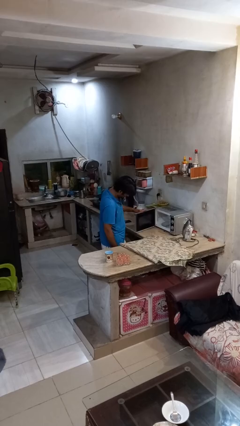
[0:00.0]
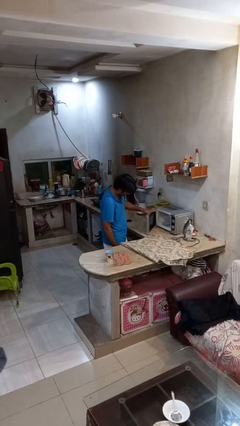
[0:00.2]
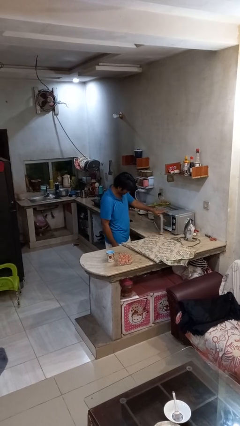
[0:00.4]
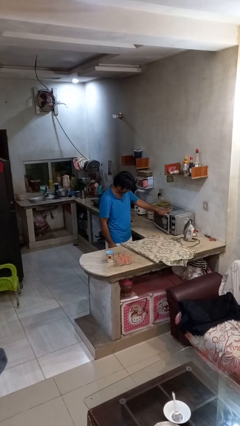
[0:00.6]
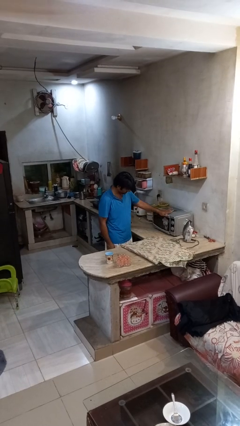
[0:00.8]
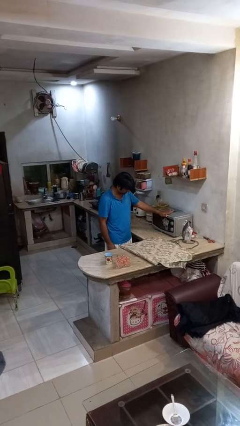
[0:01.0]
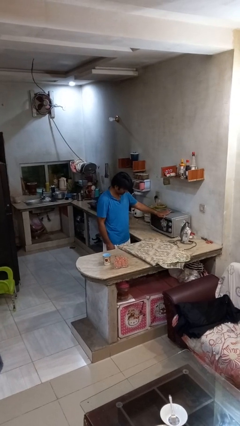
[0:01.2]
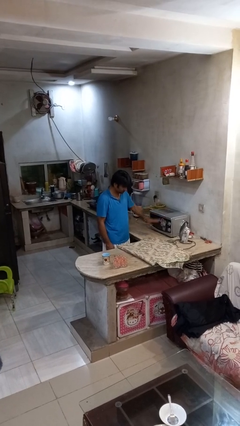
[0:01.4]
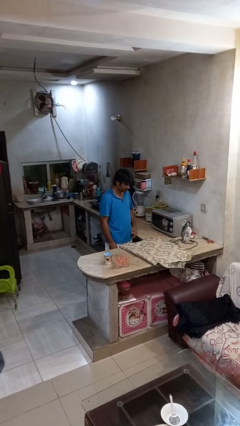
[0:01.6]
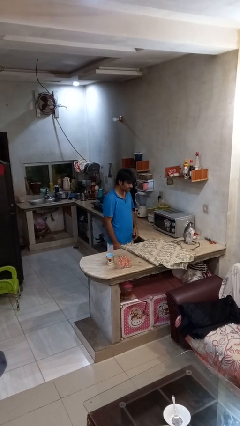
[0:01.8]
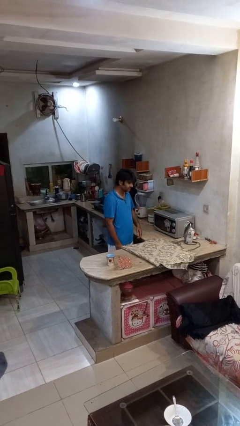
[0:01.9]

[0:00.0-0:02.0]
person closes microwave

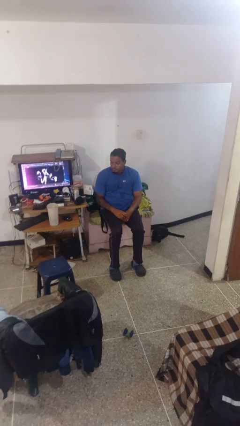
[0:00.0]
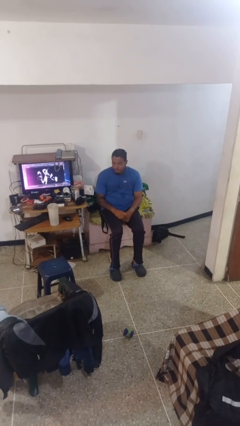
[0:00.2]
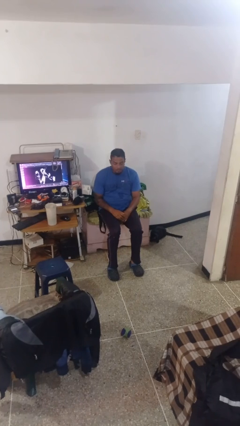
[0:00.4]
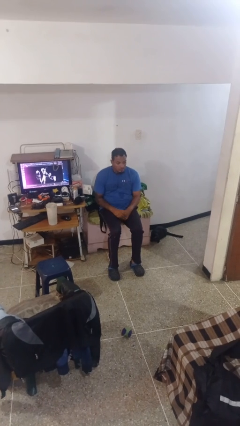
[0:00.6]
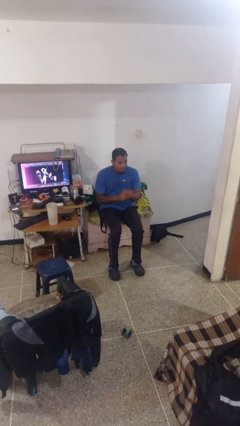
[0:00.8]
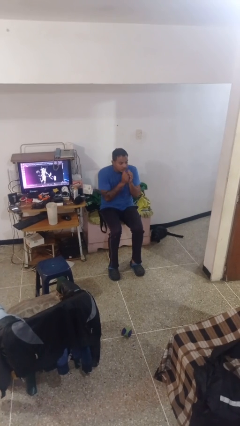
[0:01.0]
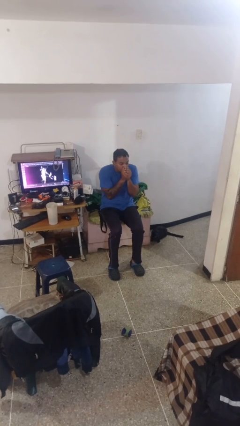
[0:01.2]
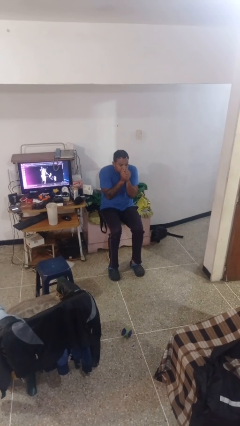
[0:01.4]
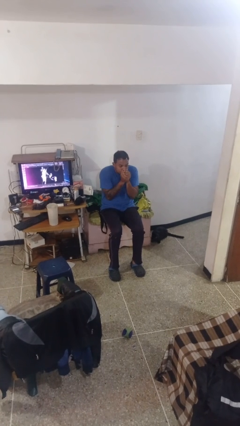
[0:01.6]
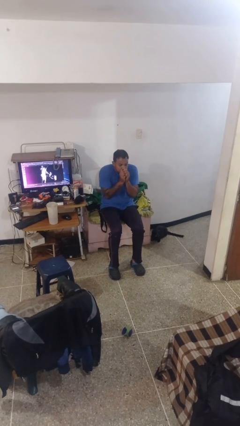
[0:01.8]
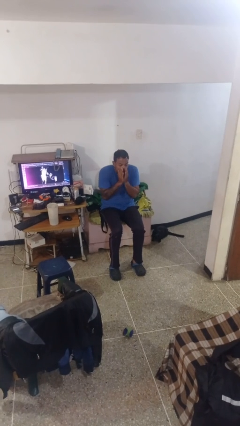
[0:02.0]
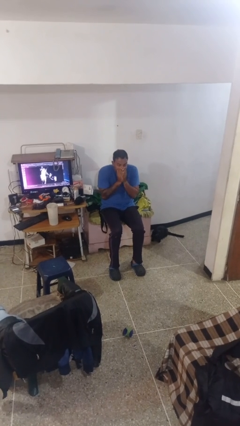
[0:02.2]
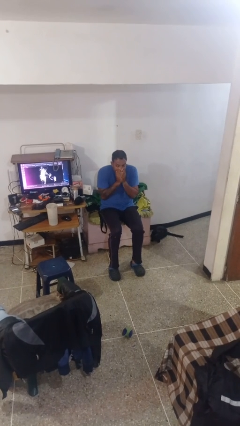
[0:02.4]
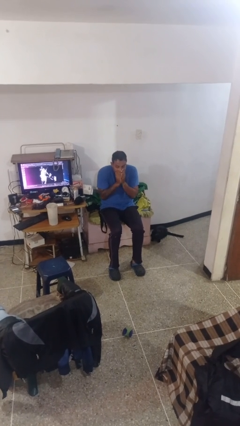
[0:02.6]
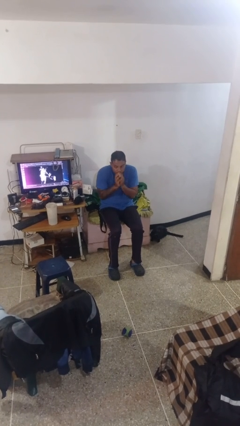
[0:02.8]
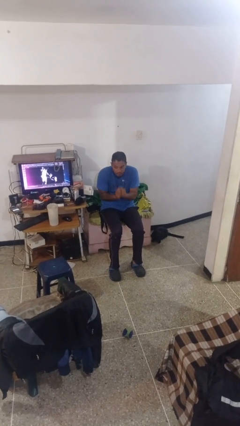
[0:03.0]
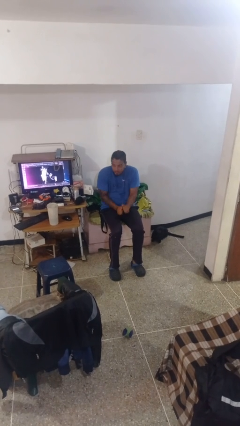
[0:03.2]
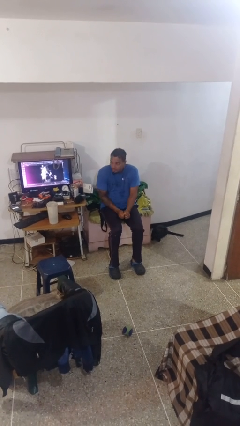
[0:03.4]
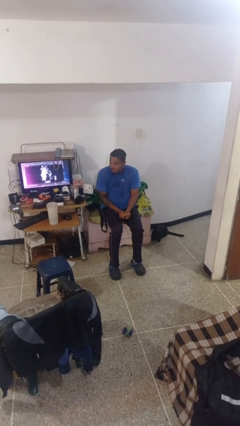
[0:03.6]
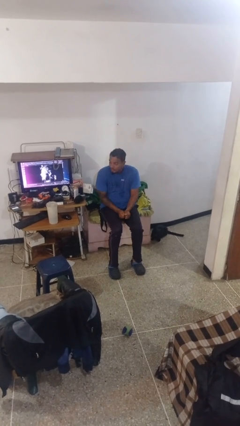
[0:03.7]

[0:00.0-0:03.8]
person blows into hands

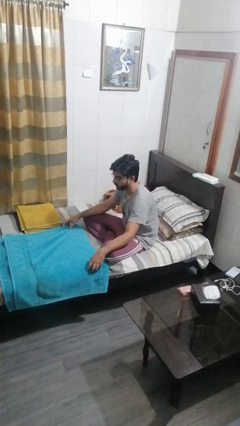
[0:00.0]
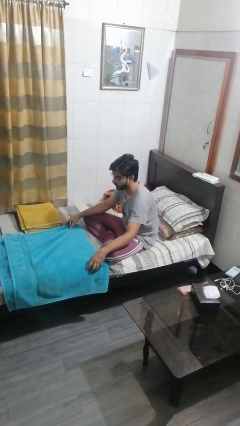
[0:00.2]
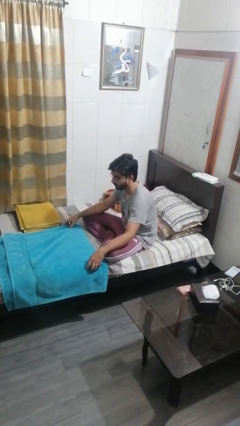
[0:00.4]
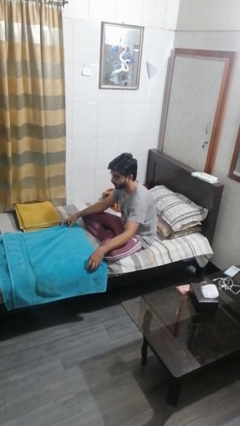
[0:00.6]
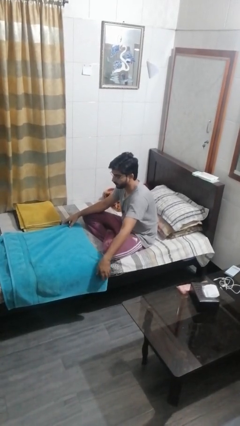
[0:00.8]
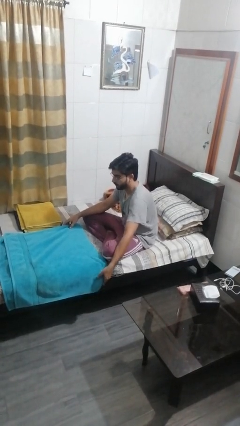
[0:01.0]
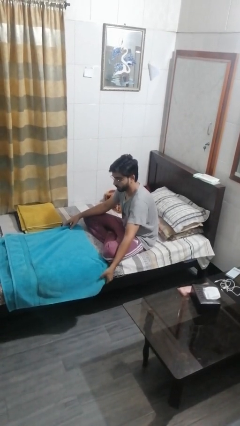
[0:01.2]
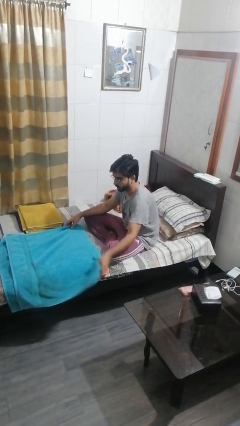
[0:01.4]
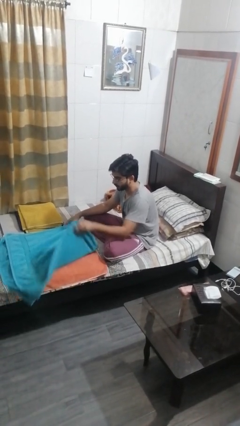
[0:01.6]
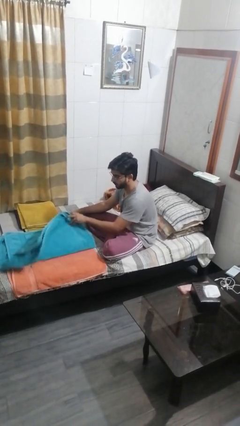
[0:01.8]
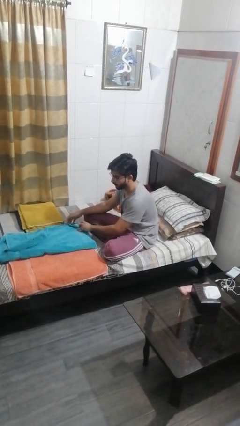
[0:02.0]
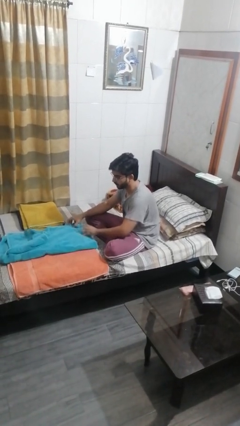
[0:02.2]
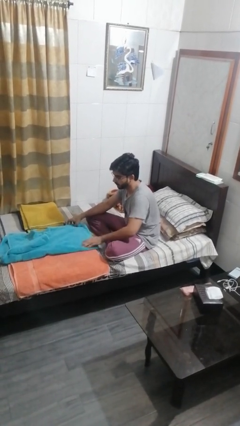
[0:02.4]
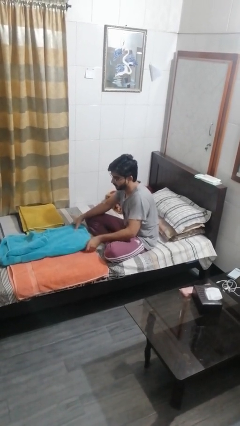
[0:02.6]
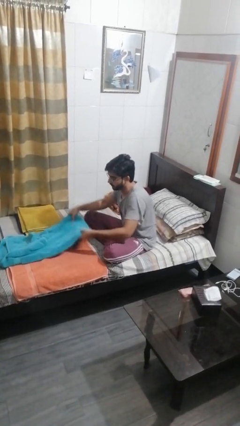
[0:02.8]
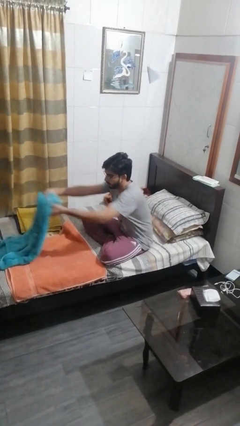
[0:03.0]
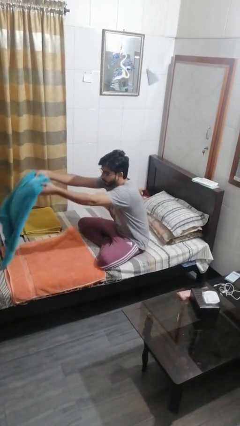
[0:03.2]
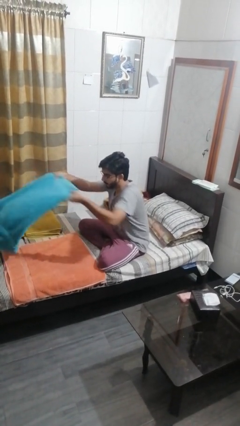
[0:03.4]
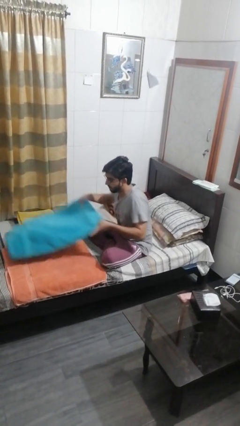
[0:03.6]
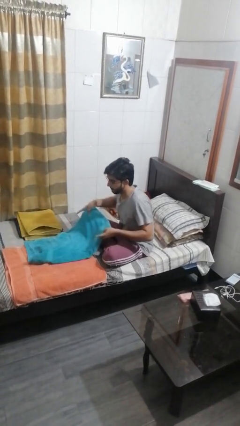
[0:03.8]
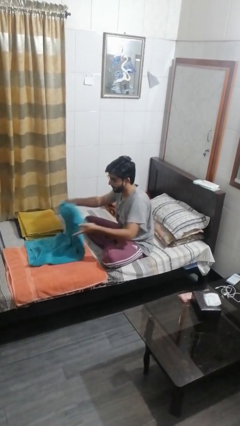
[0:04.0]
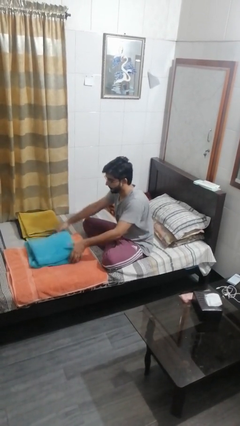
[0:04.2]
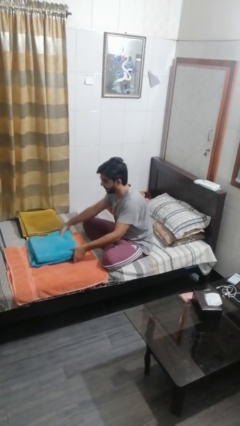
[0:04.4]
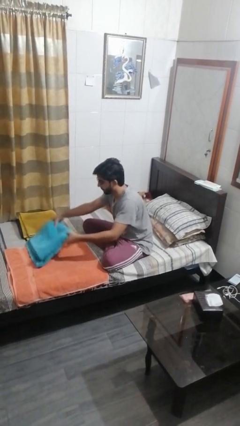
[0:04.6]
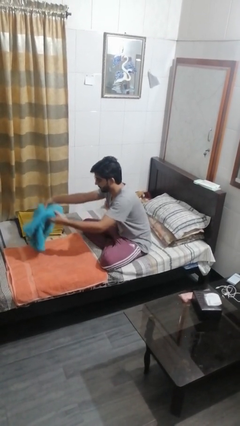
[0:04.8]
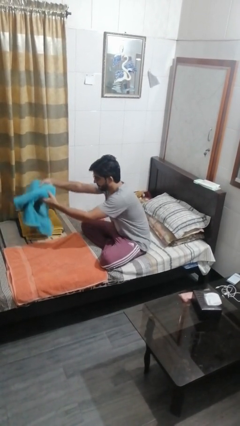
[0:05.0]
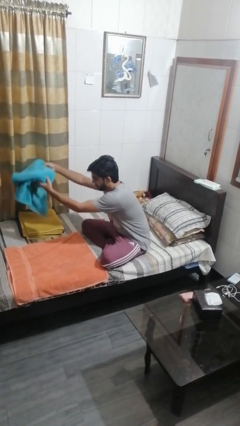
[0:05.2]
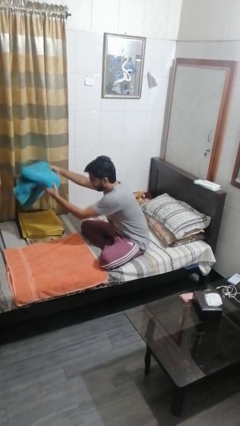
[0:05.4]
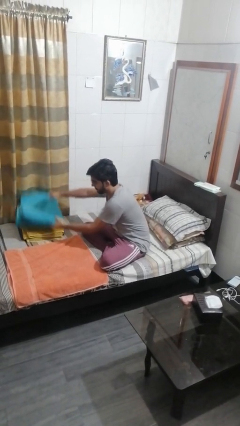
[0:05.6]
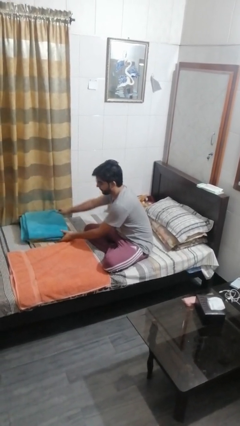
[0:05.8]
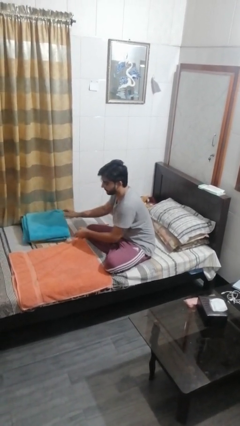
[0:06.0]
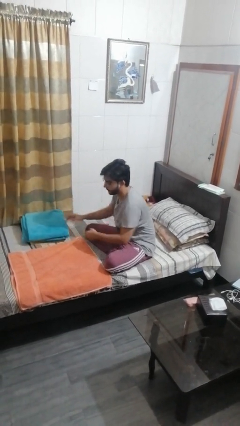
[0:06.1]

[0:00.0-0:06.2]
person folds towel

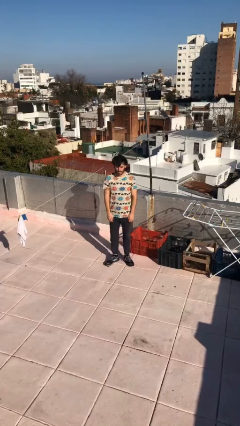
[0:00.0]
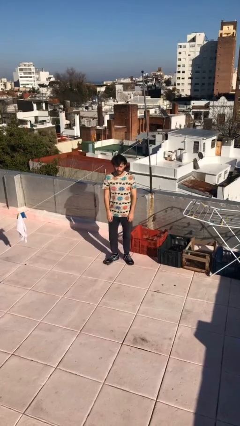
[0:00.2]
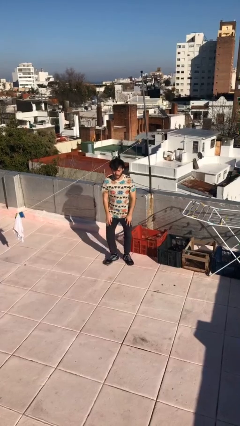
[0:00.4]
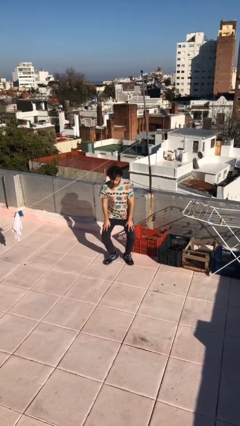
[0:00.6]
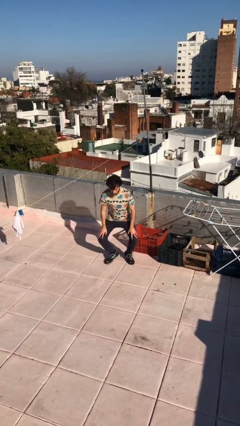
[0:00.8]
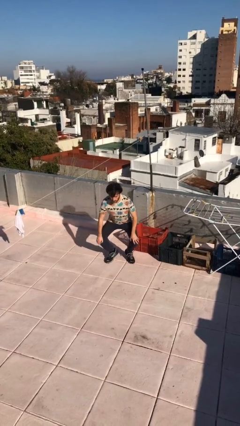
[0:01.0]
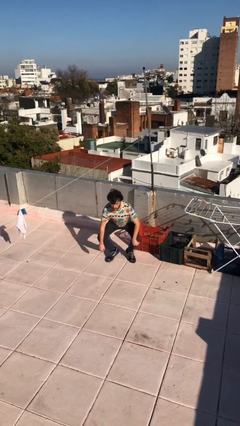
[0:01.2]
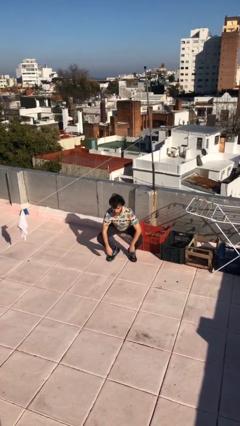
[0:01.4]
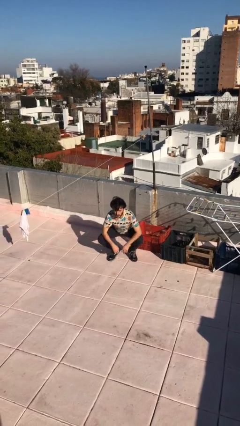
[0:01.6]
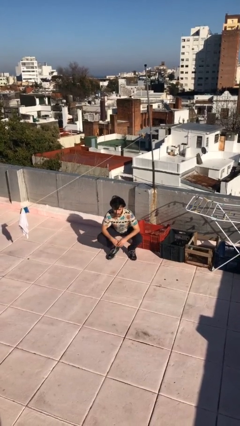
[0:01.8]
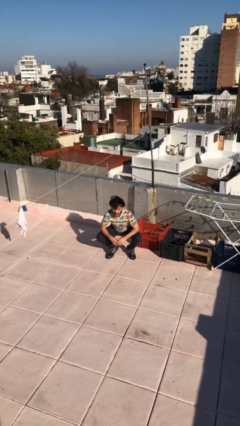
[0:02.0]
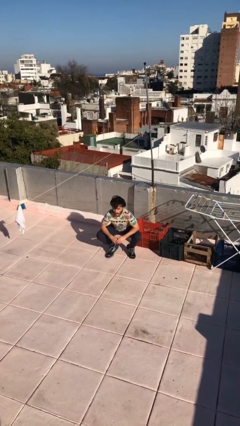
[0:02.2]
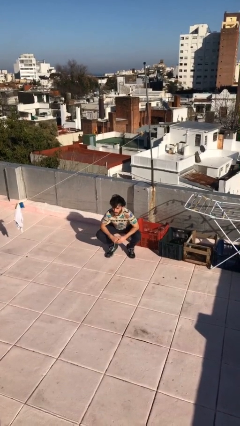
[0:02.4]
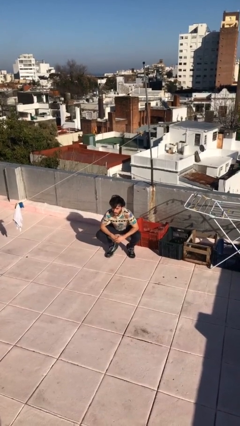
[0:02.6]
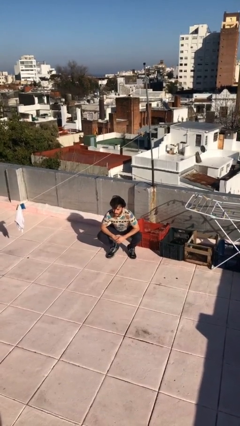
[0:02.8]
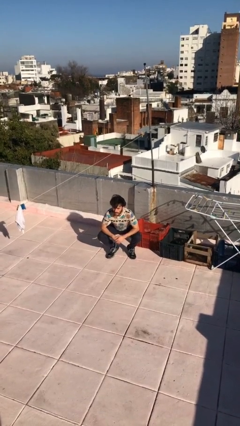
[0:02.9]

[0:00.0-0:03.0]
person squats

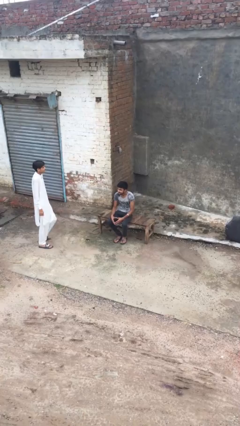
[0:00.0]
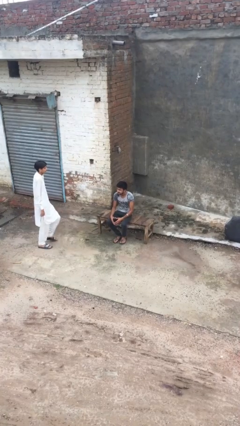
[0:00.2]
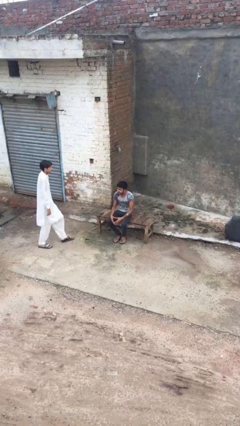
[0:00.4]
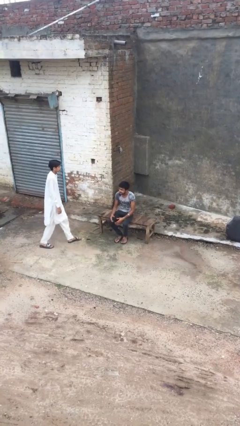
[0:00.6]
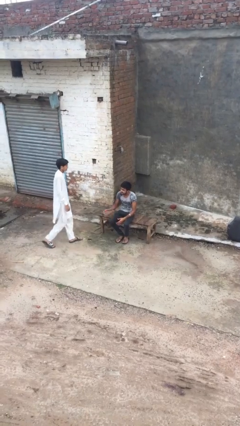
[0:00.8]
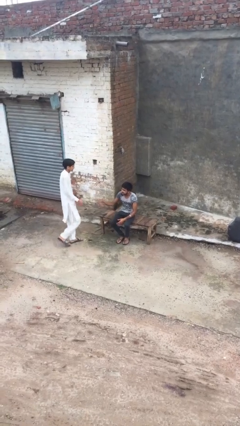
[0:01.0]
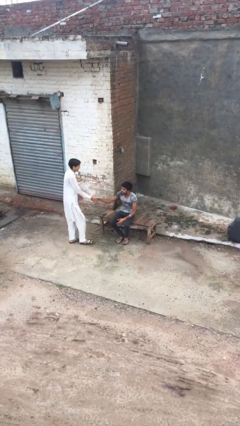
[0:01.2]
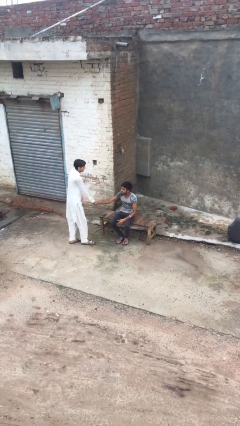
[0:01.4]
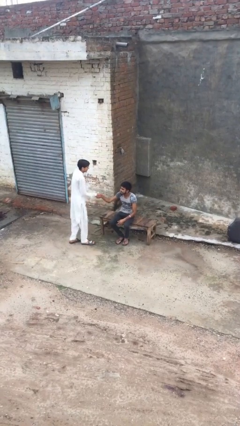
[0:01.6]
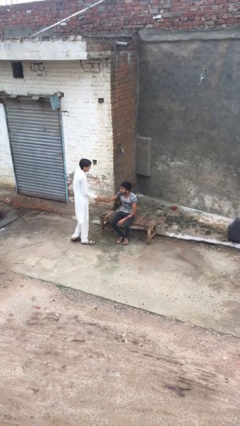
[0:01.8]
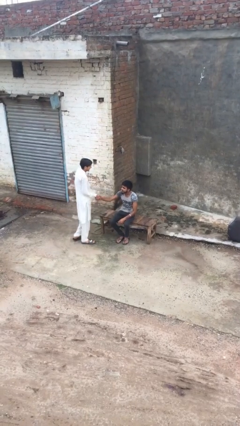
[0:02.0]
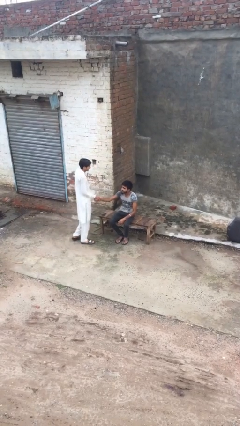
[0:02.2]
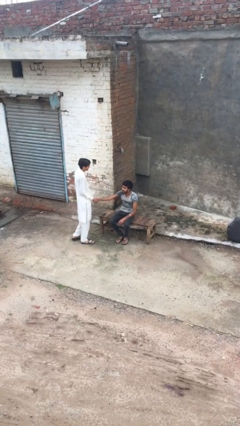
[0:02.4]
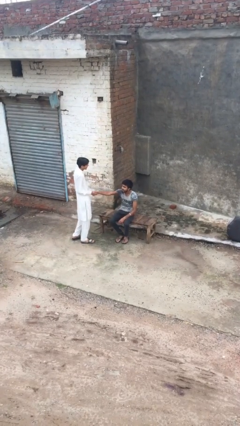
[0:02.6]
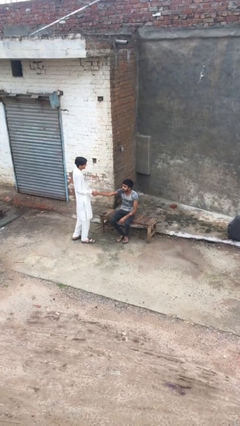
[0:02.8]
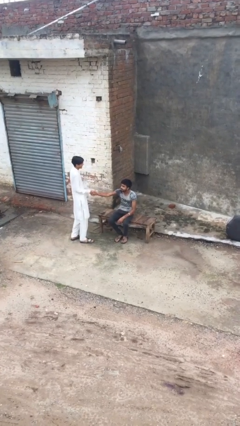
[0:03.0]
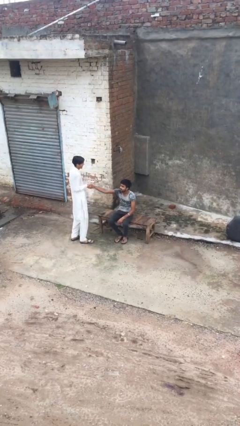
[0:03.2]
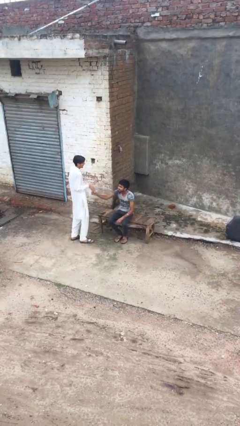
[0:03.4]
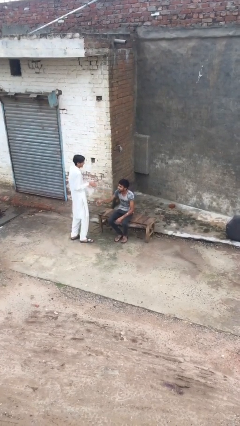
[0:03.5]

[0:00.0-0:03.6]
person shakes hand
